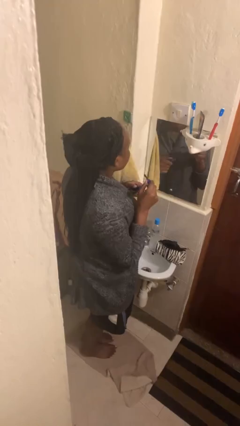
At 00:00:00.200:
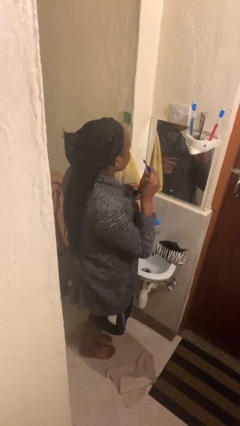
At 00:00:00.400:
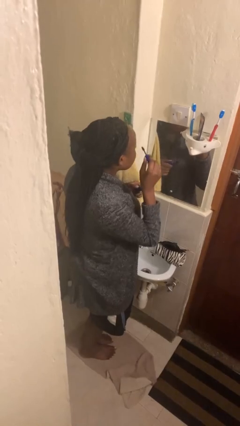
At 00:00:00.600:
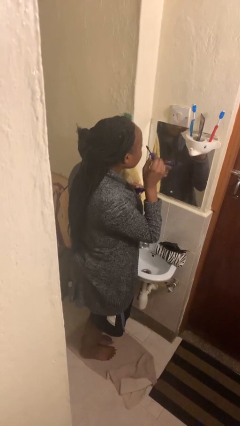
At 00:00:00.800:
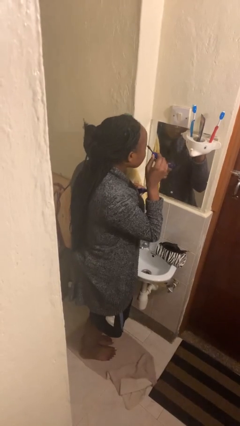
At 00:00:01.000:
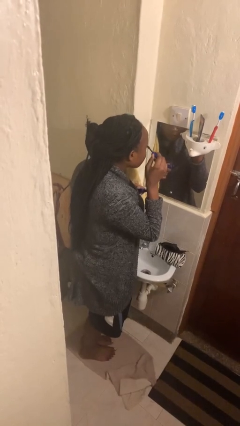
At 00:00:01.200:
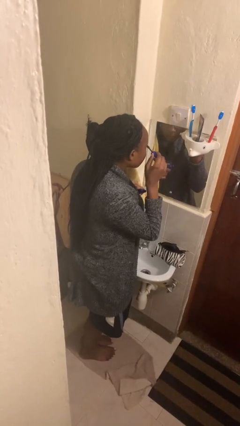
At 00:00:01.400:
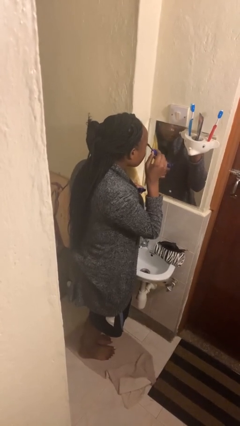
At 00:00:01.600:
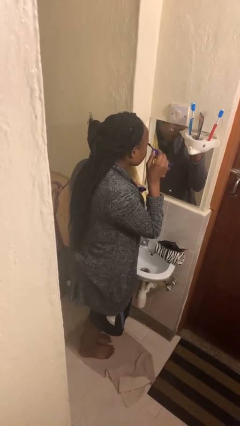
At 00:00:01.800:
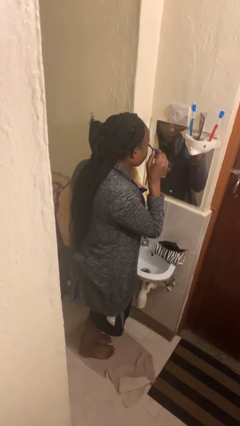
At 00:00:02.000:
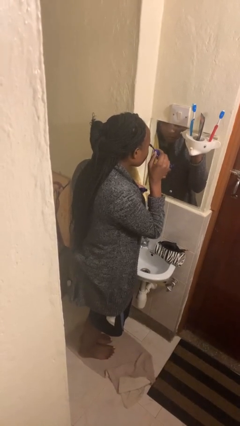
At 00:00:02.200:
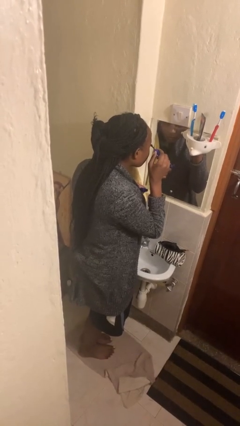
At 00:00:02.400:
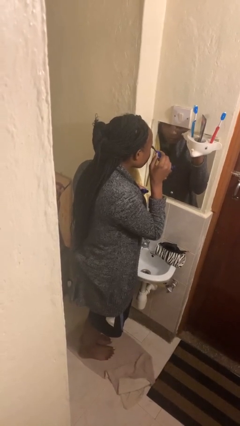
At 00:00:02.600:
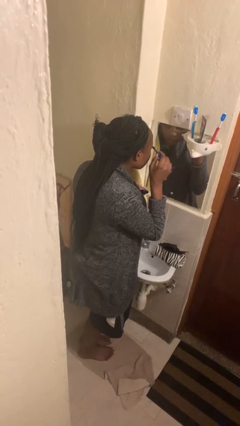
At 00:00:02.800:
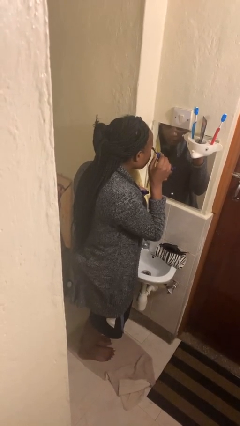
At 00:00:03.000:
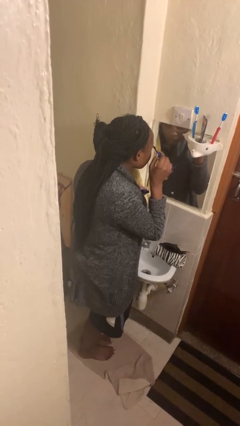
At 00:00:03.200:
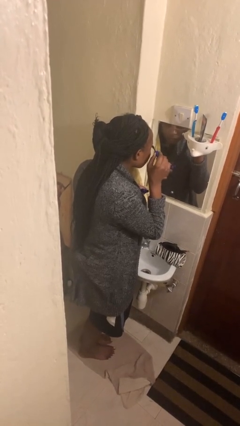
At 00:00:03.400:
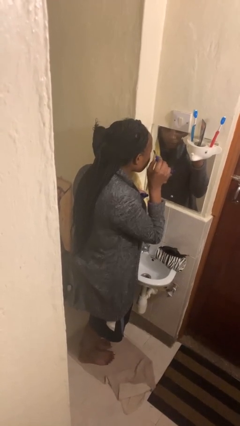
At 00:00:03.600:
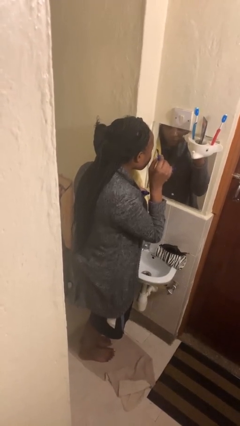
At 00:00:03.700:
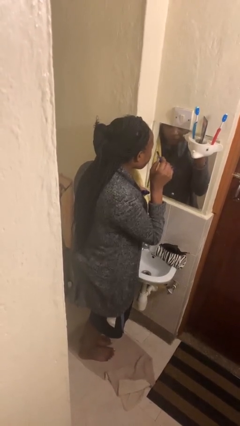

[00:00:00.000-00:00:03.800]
person applies eye makeup

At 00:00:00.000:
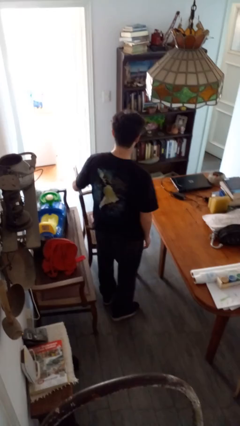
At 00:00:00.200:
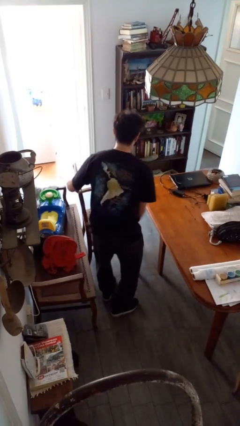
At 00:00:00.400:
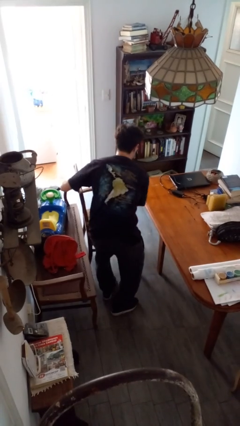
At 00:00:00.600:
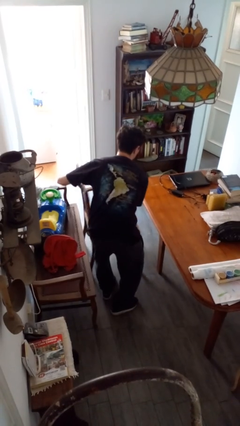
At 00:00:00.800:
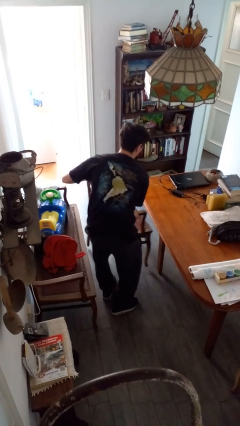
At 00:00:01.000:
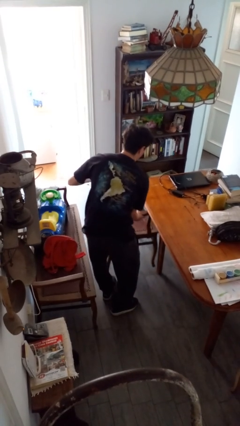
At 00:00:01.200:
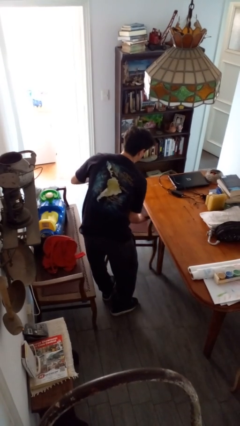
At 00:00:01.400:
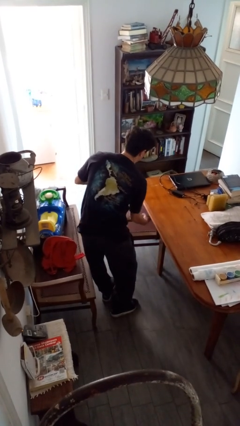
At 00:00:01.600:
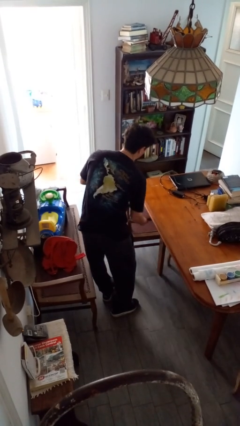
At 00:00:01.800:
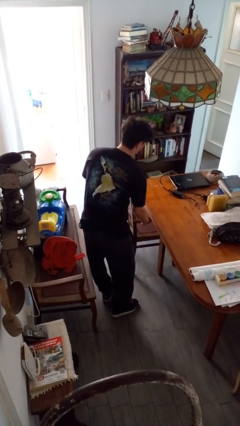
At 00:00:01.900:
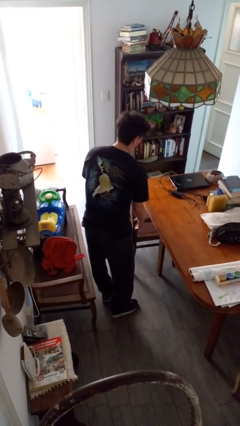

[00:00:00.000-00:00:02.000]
person pushes in chair

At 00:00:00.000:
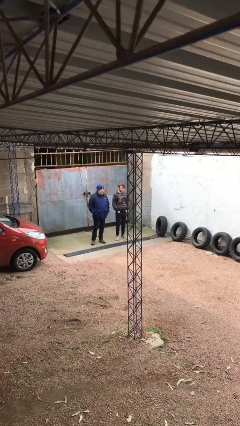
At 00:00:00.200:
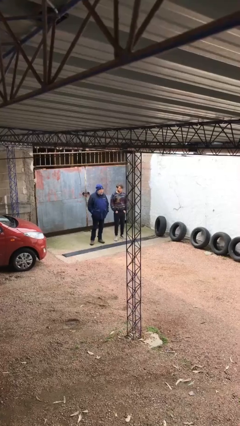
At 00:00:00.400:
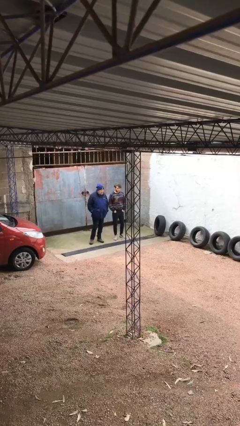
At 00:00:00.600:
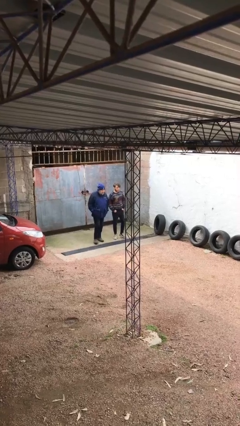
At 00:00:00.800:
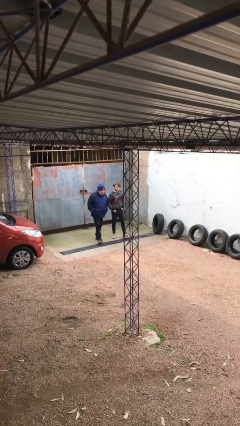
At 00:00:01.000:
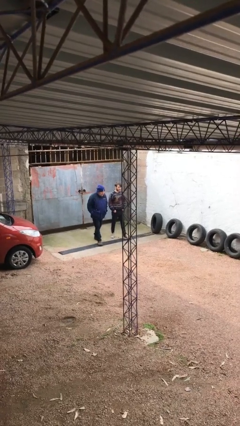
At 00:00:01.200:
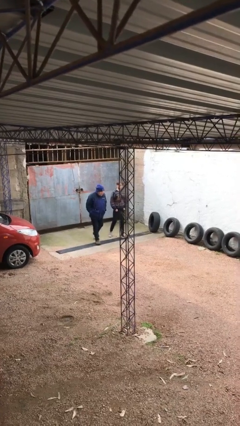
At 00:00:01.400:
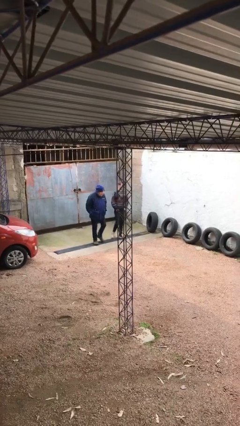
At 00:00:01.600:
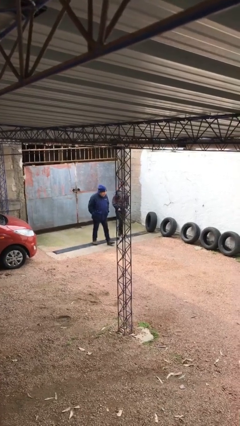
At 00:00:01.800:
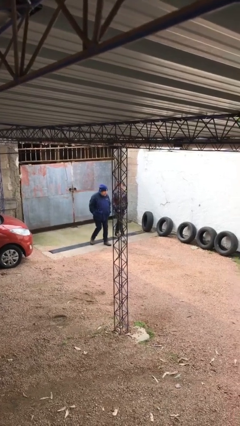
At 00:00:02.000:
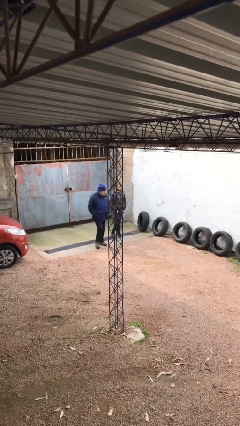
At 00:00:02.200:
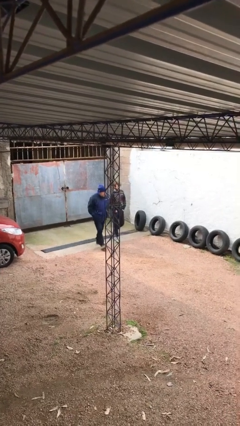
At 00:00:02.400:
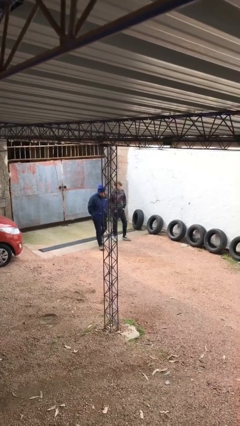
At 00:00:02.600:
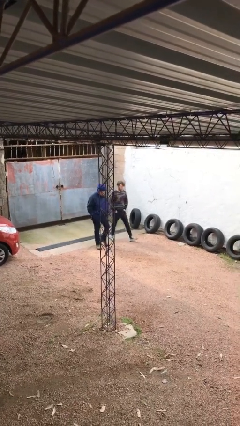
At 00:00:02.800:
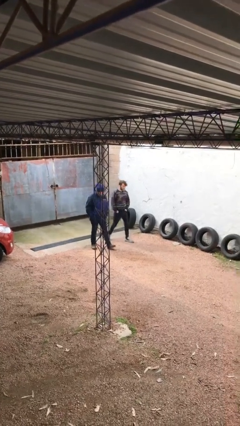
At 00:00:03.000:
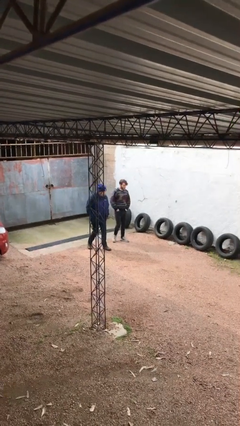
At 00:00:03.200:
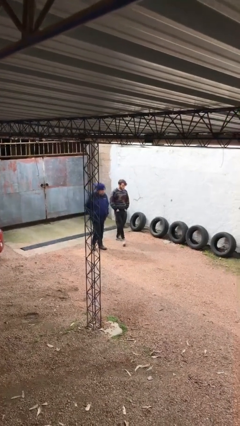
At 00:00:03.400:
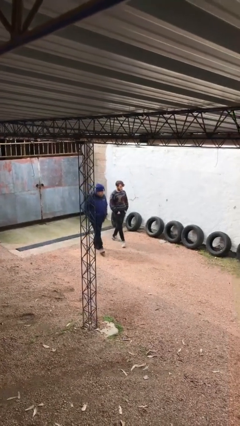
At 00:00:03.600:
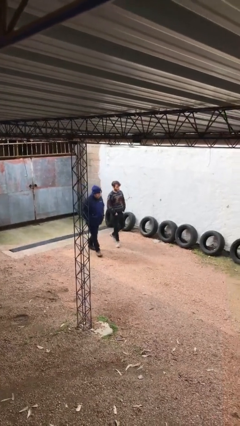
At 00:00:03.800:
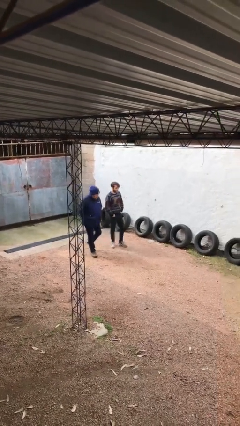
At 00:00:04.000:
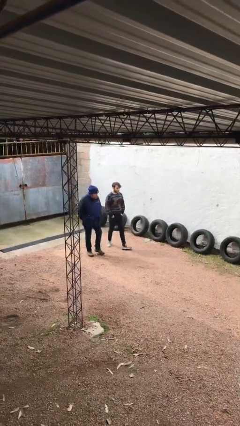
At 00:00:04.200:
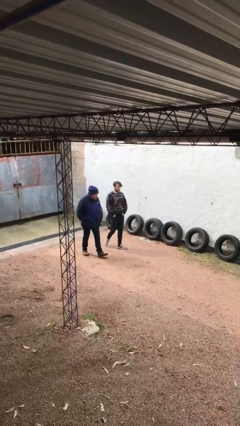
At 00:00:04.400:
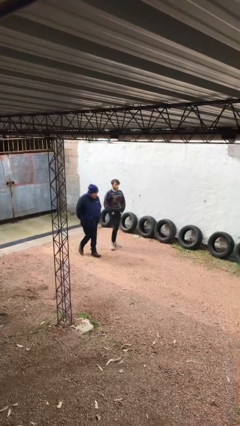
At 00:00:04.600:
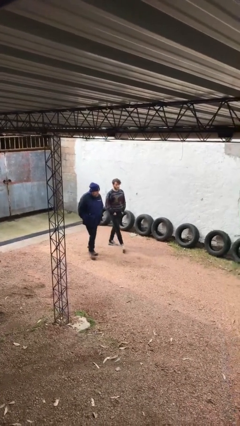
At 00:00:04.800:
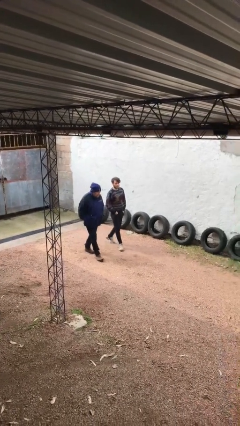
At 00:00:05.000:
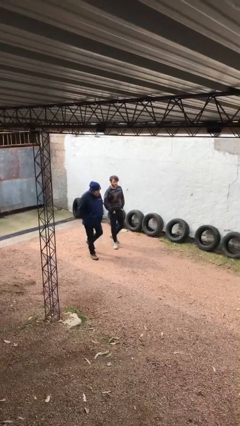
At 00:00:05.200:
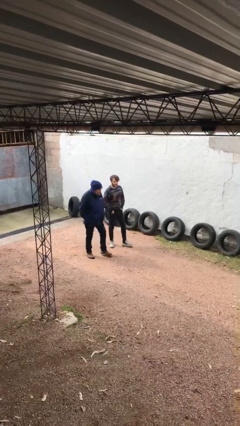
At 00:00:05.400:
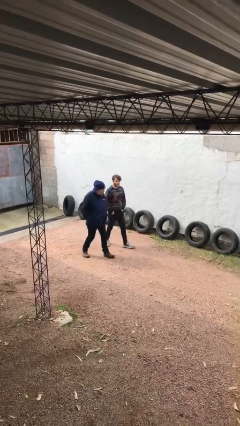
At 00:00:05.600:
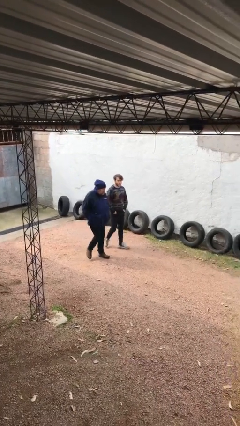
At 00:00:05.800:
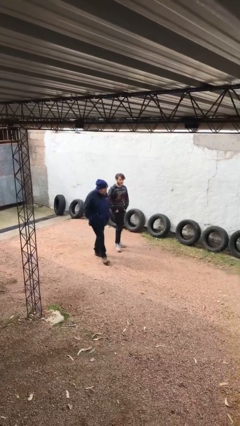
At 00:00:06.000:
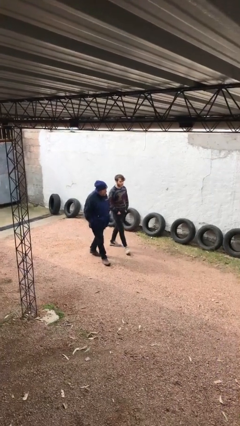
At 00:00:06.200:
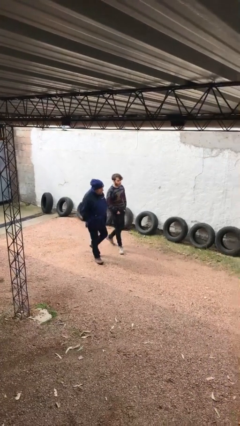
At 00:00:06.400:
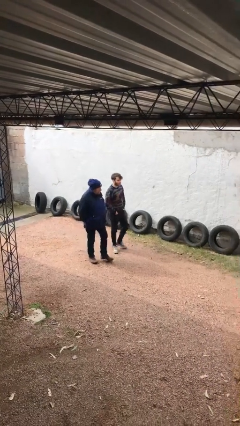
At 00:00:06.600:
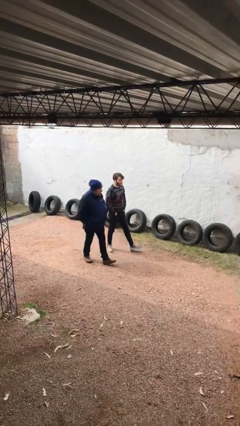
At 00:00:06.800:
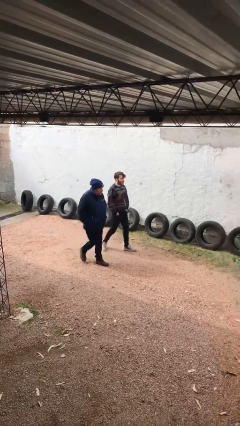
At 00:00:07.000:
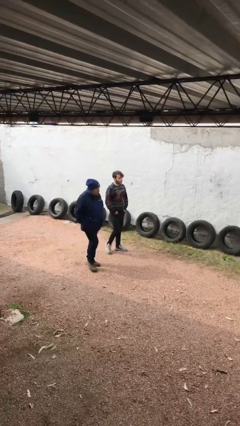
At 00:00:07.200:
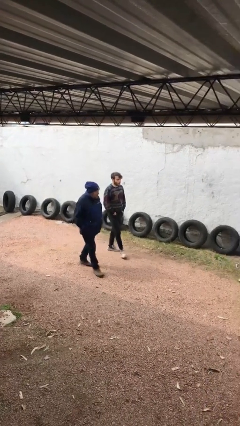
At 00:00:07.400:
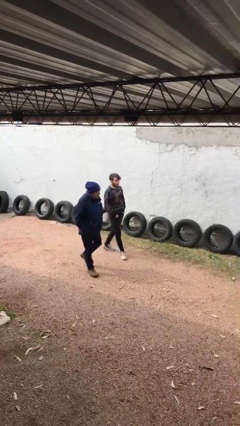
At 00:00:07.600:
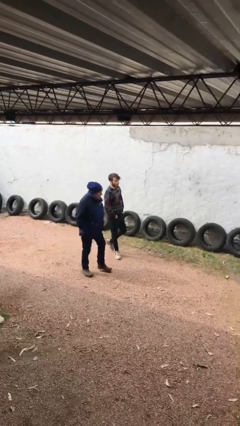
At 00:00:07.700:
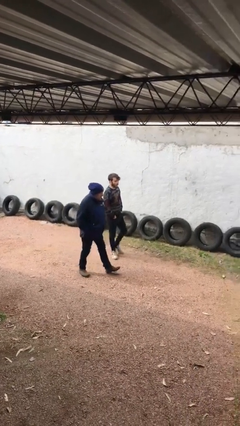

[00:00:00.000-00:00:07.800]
person talks to person

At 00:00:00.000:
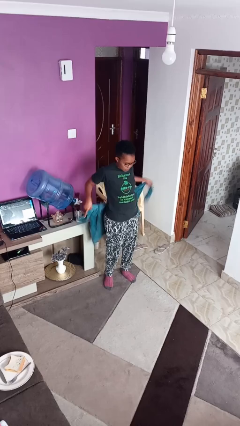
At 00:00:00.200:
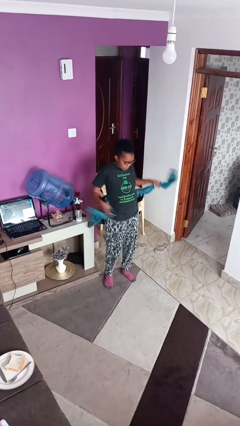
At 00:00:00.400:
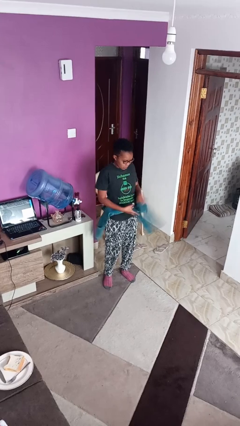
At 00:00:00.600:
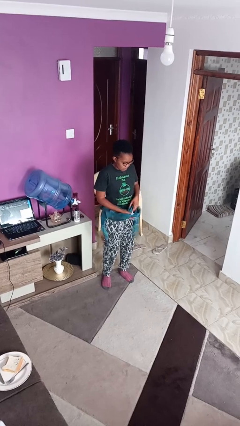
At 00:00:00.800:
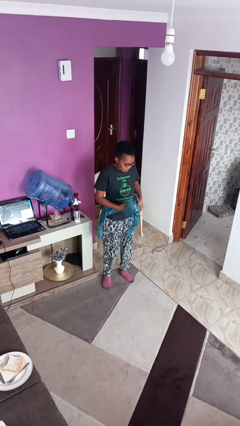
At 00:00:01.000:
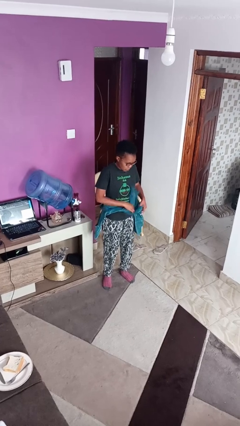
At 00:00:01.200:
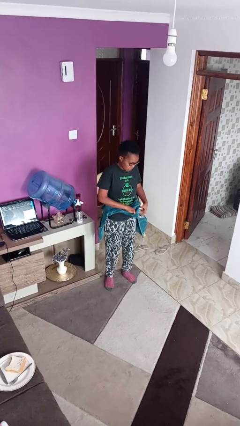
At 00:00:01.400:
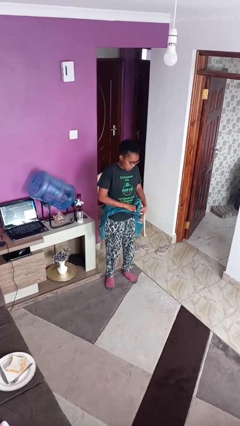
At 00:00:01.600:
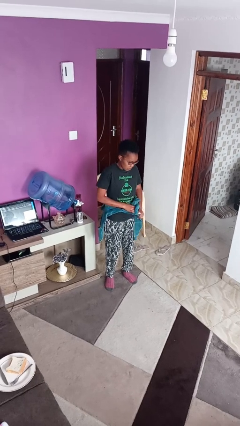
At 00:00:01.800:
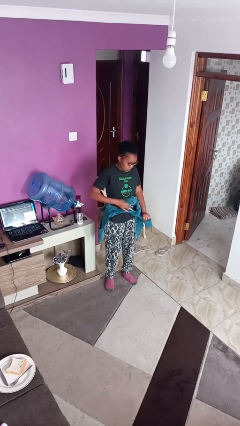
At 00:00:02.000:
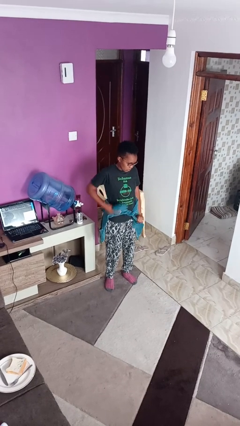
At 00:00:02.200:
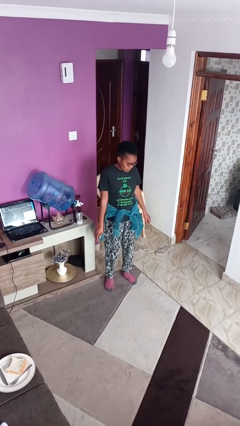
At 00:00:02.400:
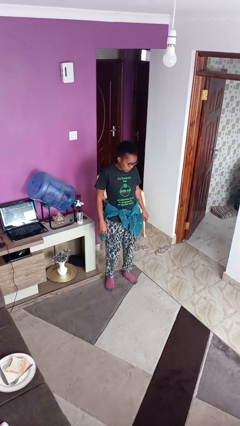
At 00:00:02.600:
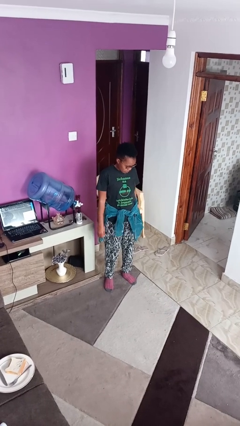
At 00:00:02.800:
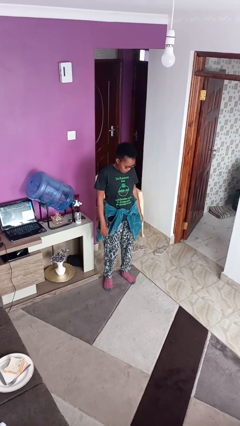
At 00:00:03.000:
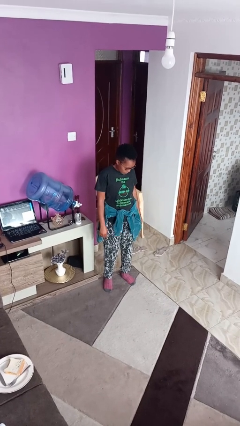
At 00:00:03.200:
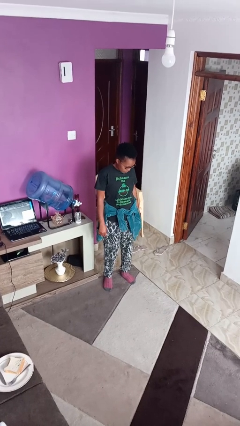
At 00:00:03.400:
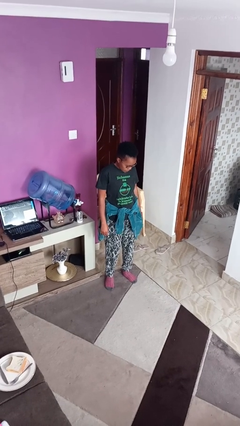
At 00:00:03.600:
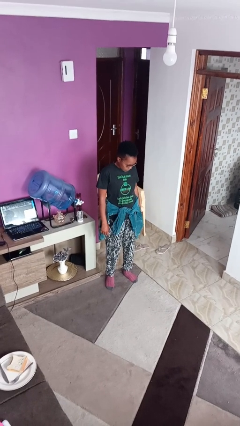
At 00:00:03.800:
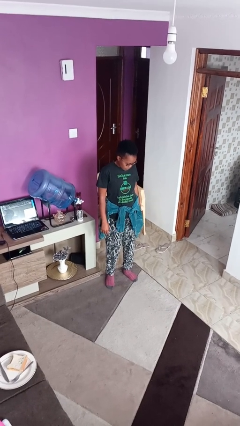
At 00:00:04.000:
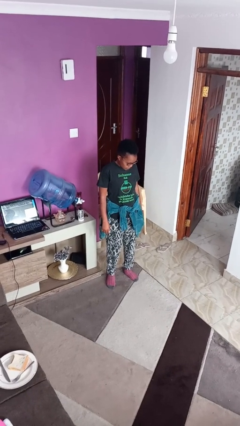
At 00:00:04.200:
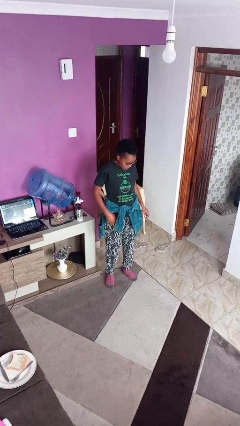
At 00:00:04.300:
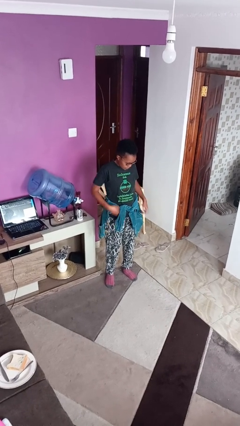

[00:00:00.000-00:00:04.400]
person ties jacket around waist
